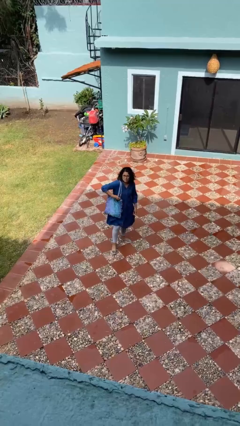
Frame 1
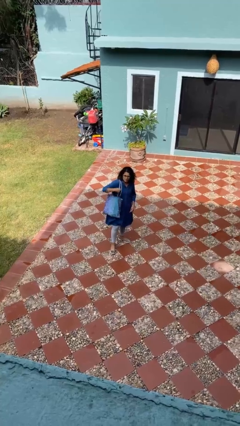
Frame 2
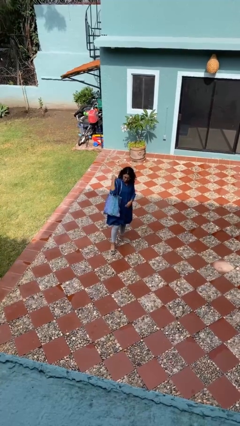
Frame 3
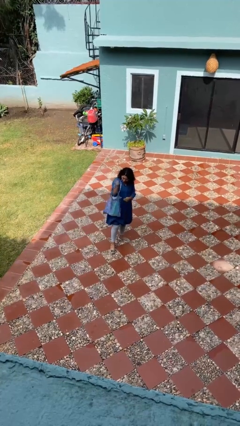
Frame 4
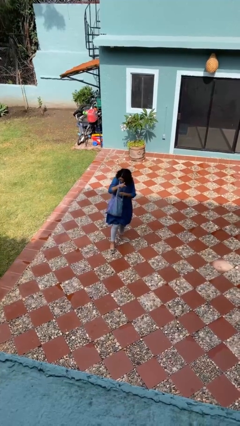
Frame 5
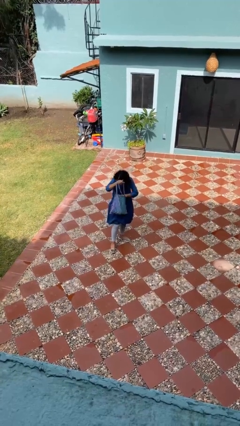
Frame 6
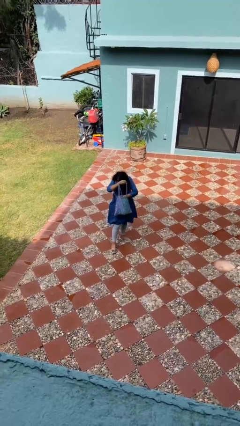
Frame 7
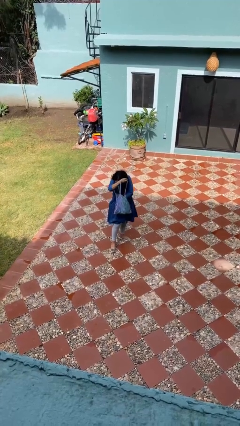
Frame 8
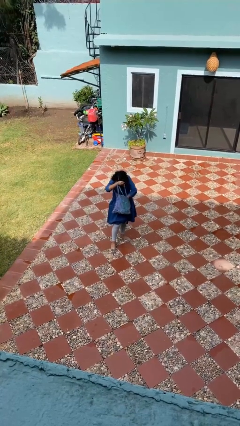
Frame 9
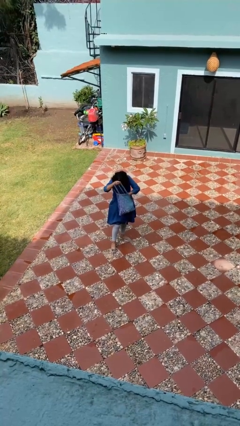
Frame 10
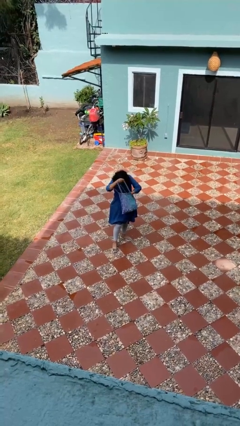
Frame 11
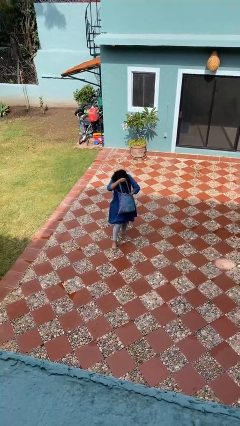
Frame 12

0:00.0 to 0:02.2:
person searches in purse

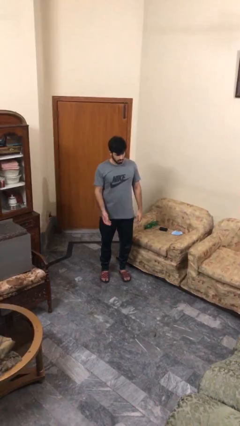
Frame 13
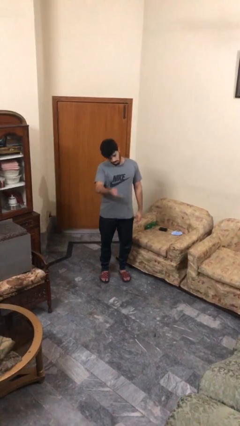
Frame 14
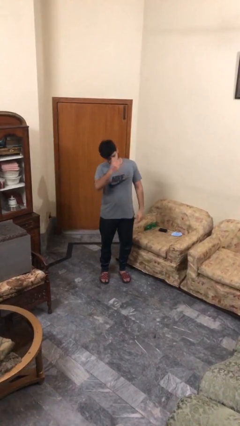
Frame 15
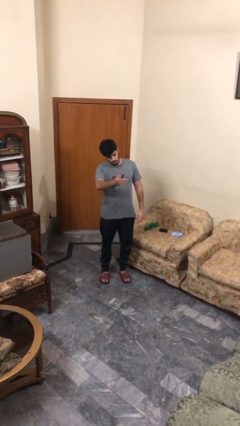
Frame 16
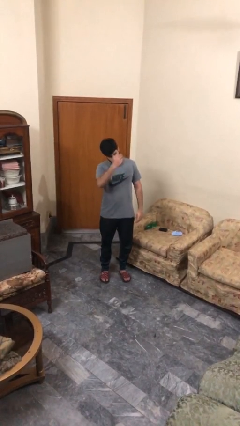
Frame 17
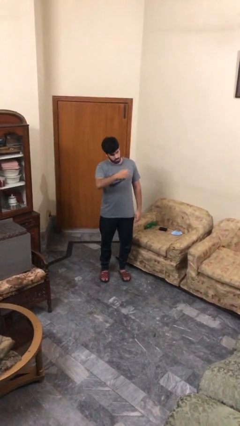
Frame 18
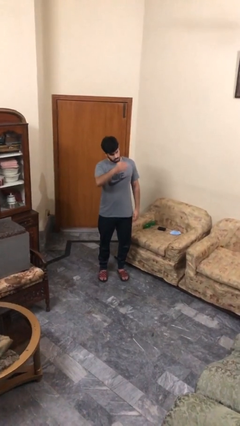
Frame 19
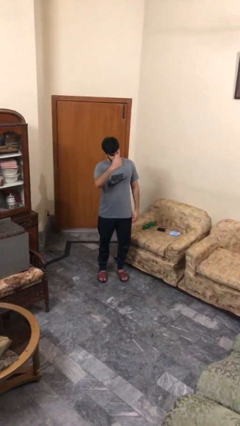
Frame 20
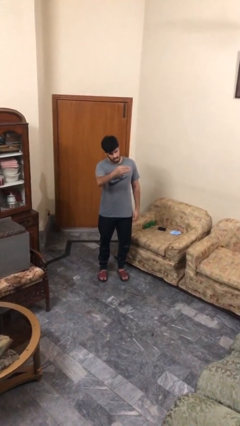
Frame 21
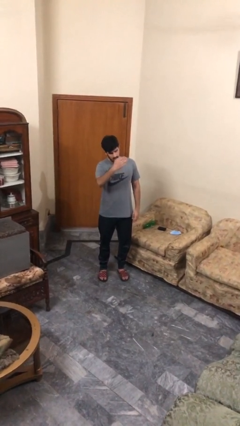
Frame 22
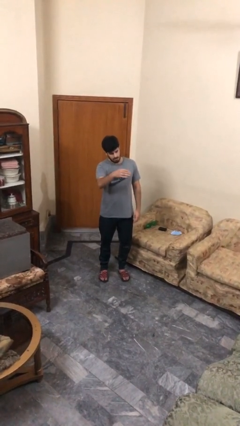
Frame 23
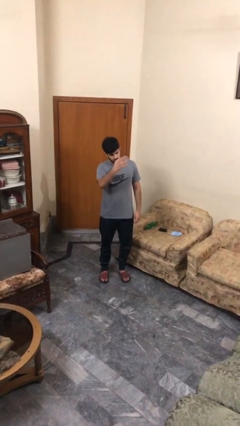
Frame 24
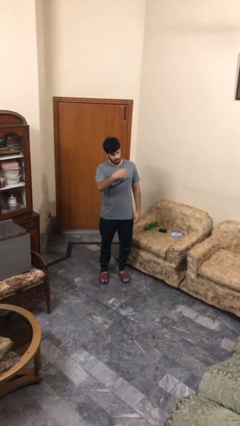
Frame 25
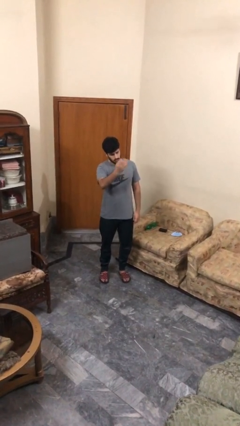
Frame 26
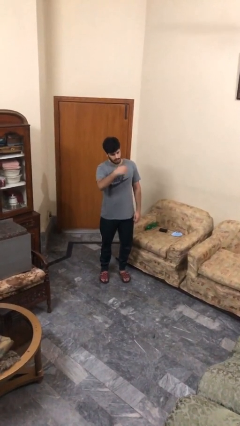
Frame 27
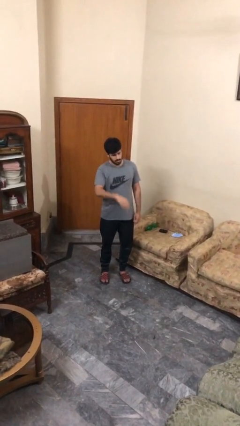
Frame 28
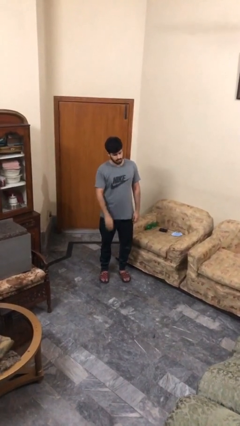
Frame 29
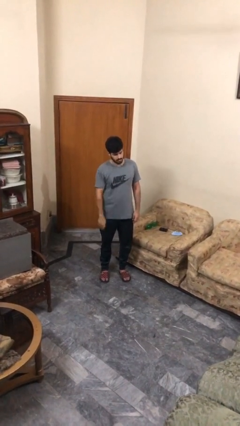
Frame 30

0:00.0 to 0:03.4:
person gestures come here

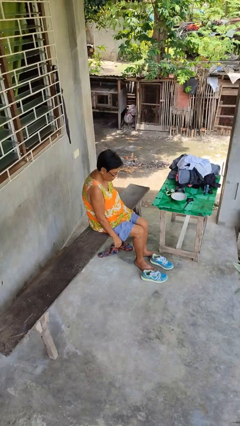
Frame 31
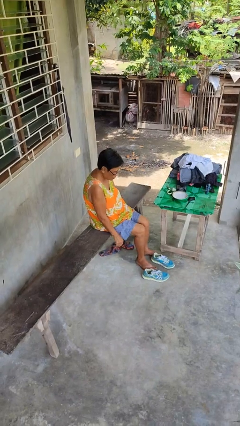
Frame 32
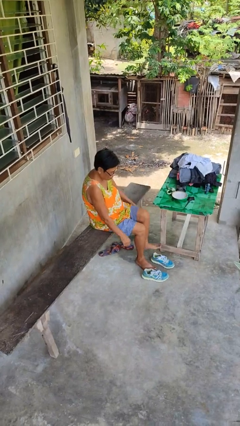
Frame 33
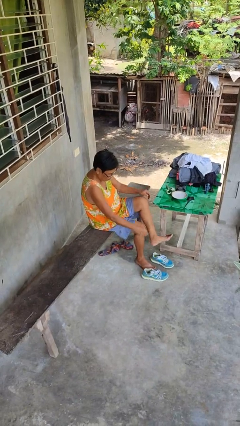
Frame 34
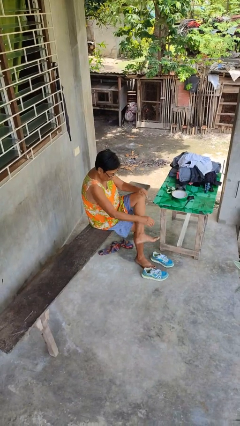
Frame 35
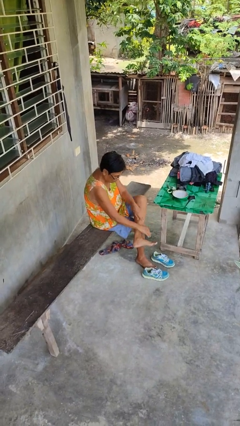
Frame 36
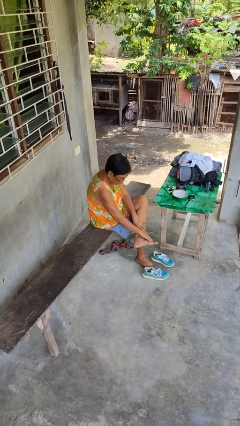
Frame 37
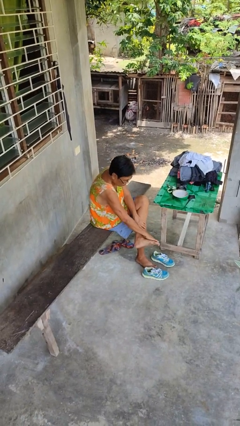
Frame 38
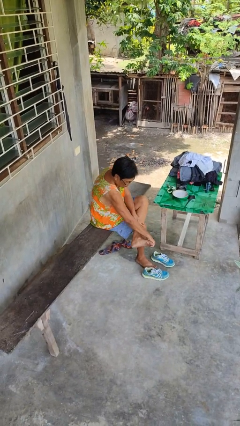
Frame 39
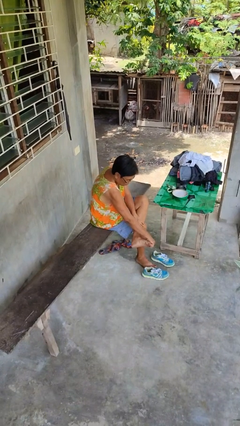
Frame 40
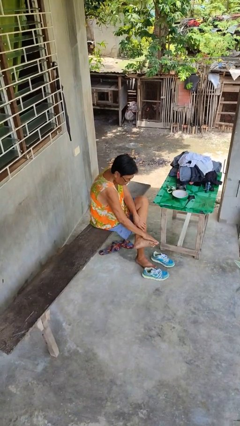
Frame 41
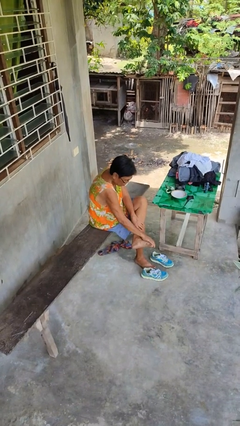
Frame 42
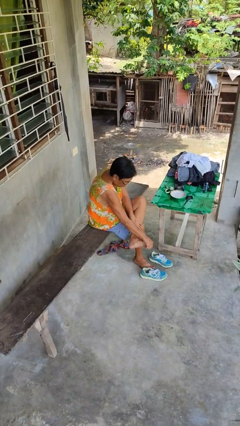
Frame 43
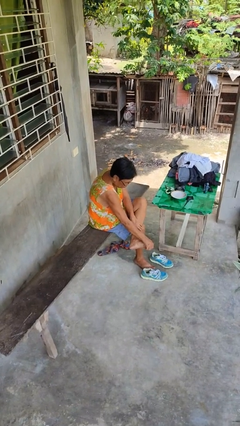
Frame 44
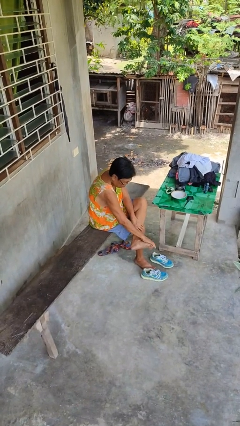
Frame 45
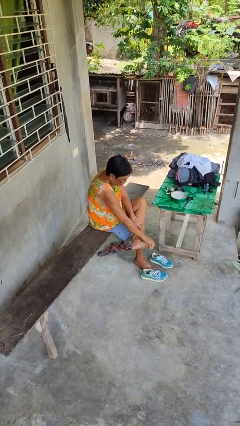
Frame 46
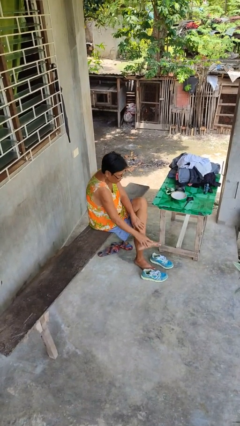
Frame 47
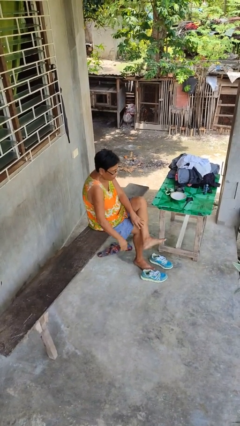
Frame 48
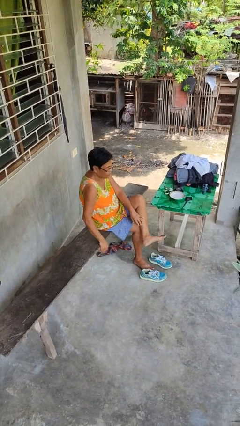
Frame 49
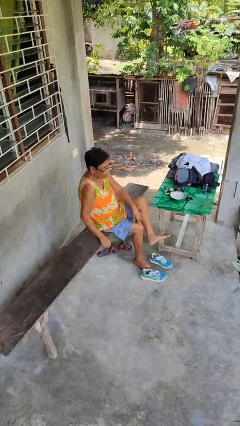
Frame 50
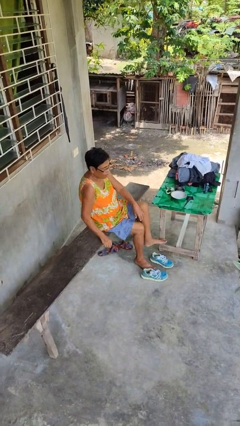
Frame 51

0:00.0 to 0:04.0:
person rubs foot

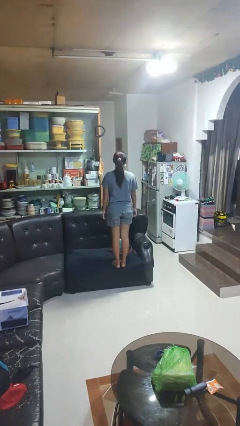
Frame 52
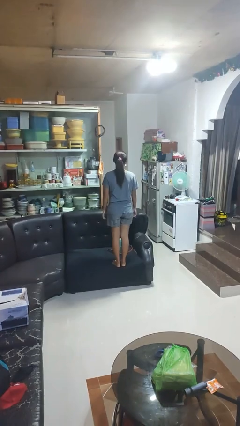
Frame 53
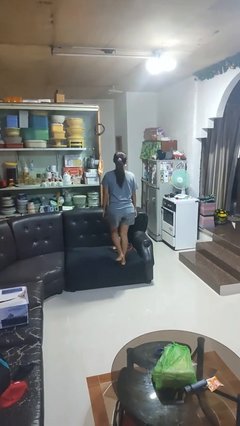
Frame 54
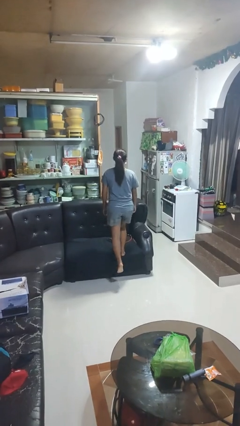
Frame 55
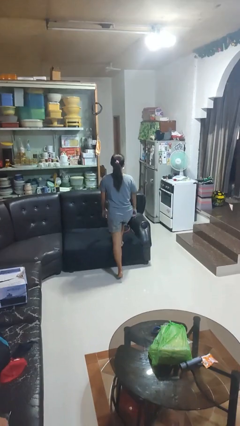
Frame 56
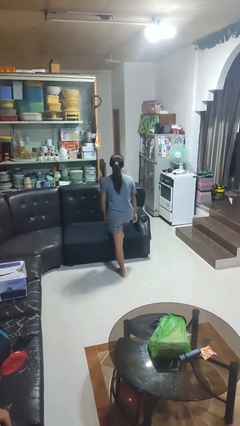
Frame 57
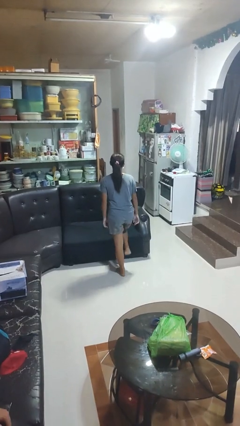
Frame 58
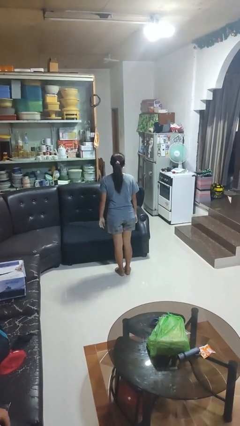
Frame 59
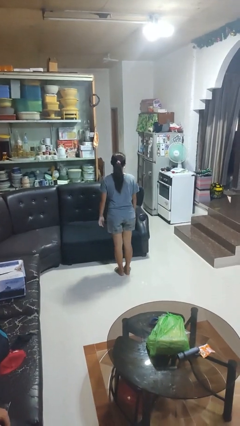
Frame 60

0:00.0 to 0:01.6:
person climbs off couch

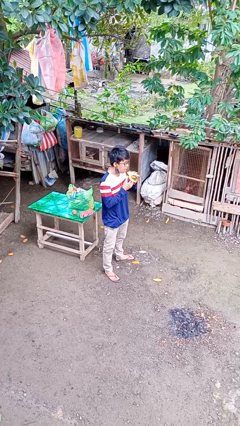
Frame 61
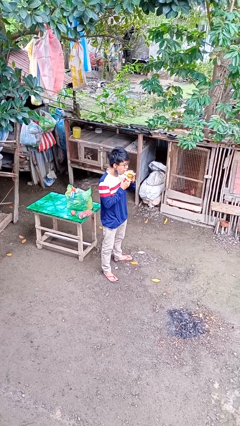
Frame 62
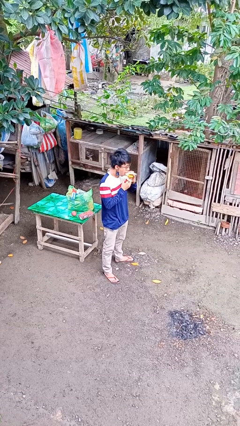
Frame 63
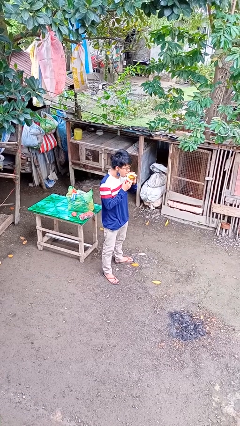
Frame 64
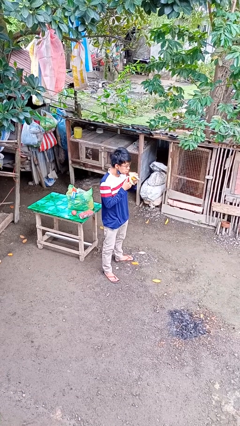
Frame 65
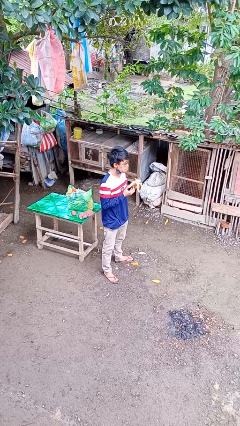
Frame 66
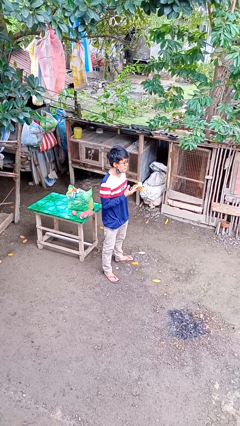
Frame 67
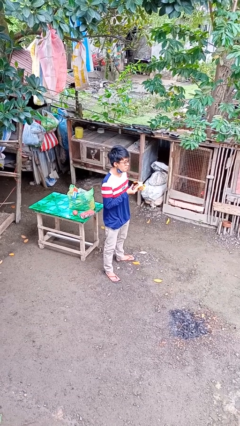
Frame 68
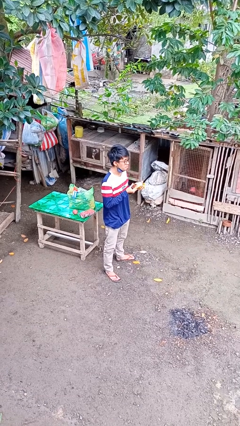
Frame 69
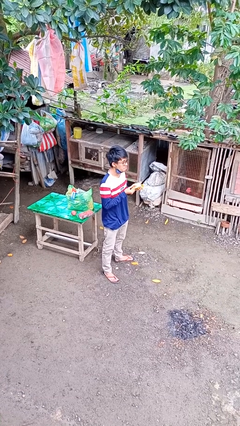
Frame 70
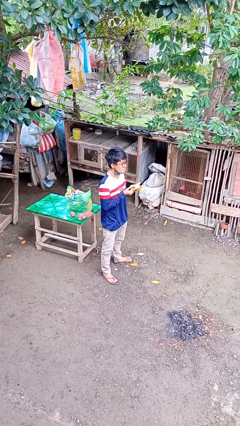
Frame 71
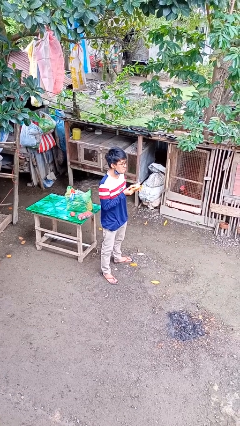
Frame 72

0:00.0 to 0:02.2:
person eats banana

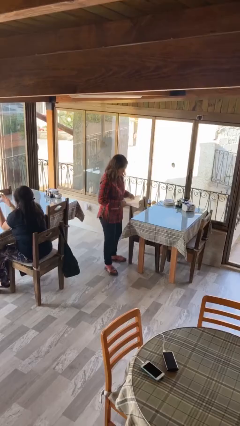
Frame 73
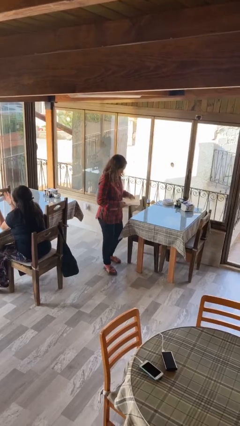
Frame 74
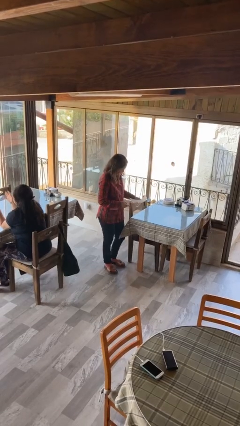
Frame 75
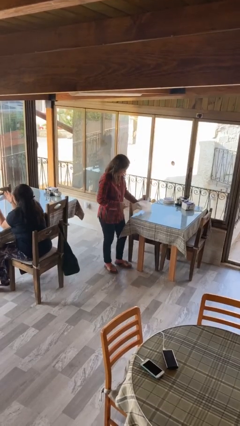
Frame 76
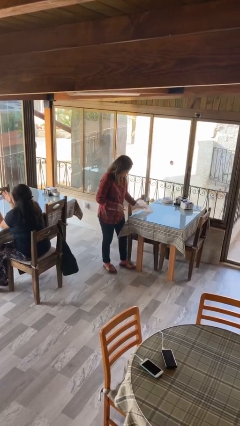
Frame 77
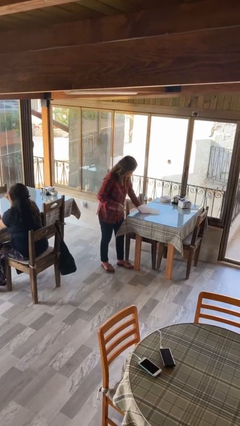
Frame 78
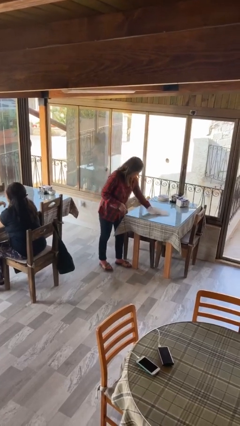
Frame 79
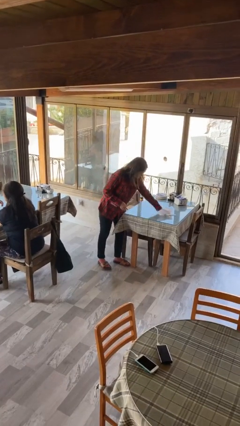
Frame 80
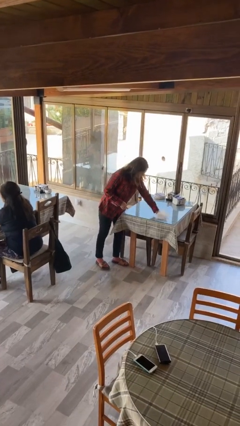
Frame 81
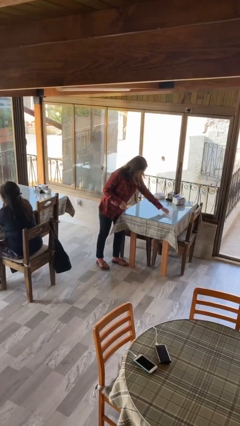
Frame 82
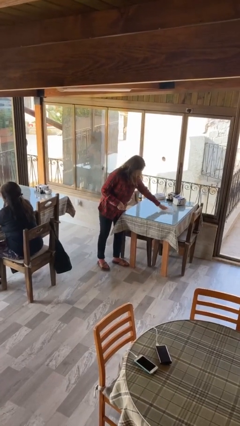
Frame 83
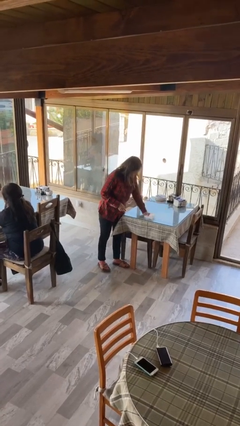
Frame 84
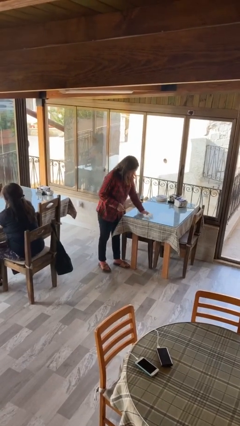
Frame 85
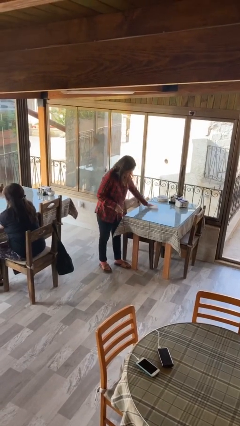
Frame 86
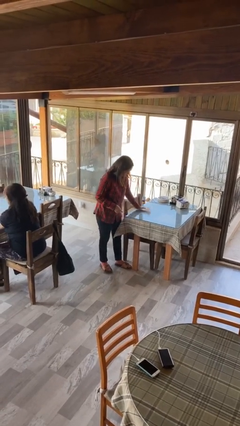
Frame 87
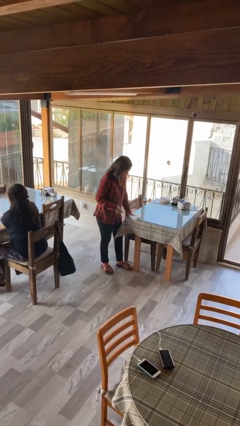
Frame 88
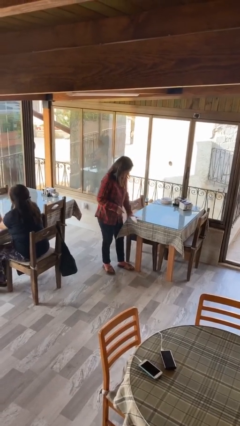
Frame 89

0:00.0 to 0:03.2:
person cleans table with rag

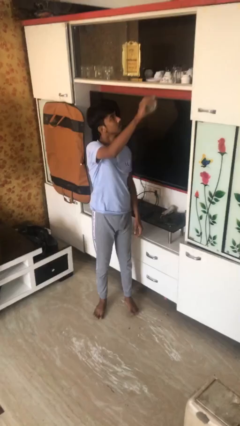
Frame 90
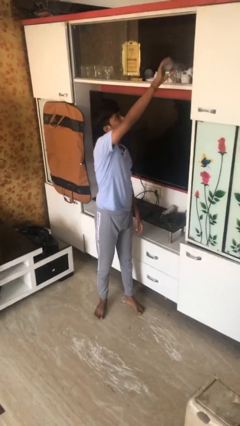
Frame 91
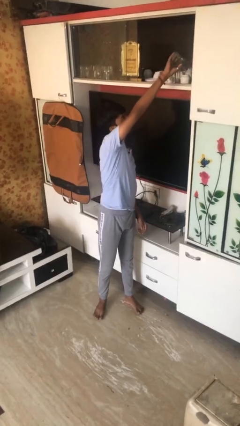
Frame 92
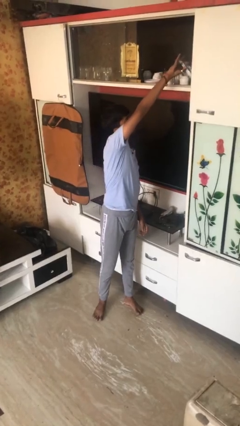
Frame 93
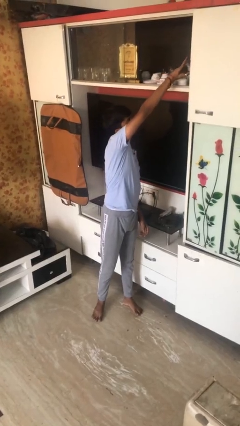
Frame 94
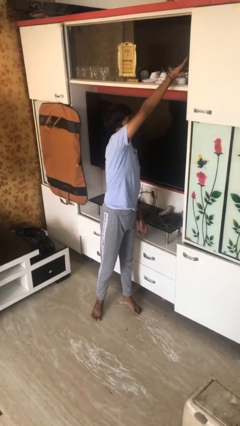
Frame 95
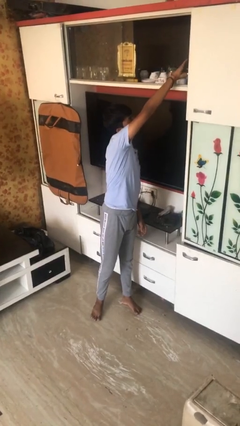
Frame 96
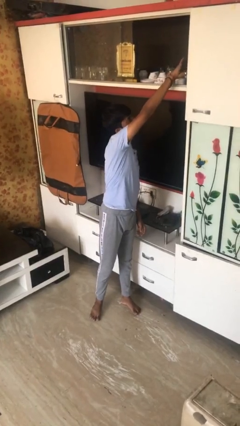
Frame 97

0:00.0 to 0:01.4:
person puts object in cabinet
